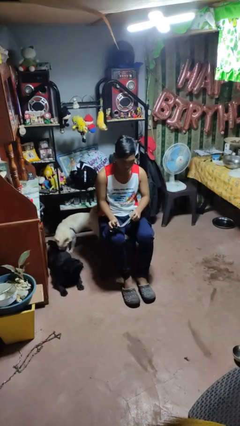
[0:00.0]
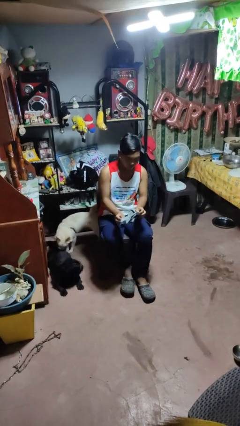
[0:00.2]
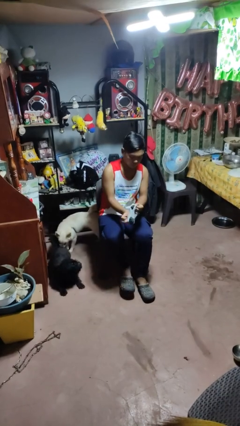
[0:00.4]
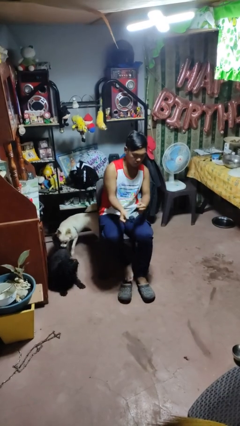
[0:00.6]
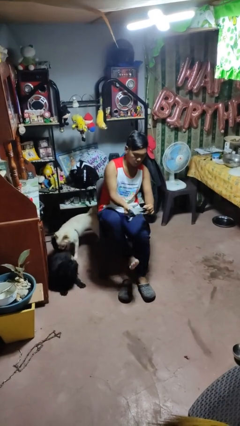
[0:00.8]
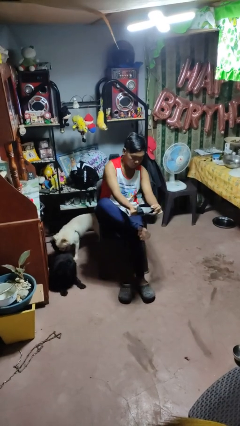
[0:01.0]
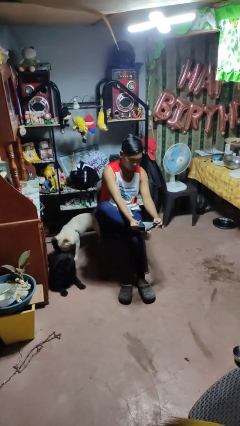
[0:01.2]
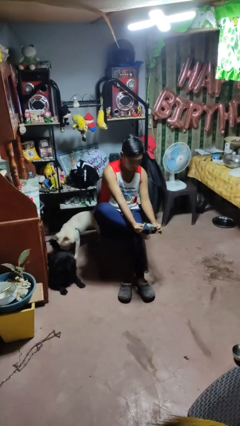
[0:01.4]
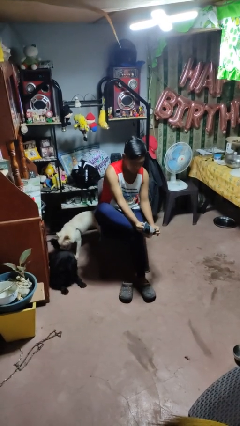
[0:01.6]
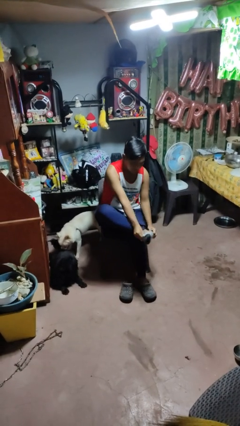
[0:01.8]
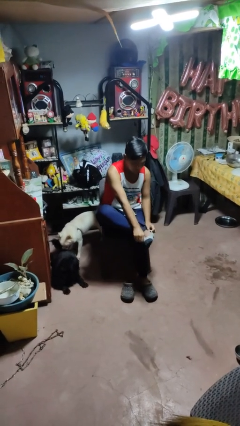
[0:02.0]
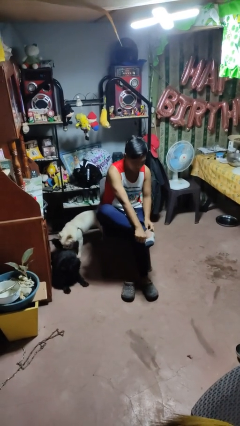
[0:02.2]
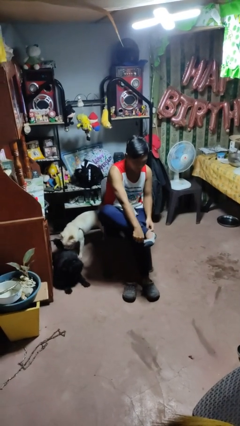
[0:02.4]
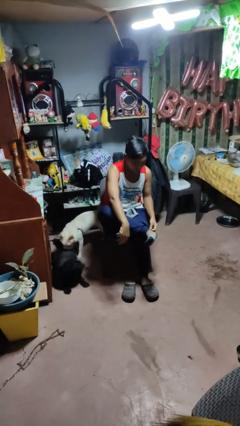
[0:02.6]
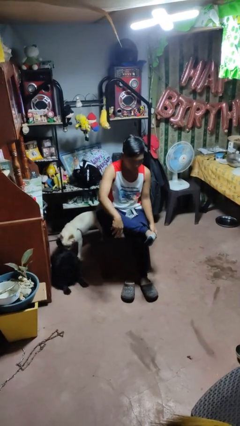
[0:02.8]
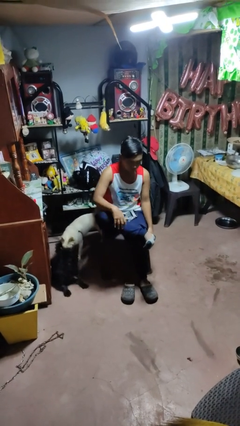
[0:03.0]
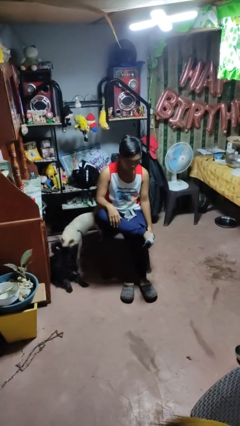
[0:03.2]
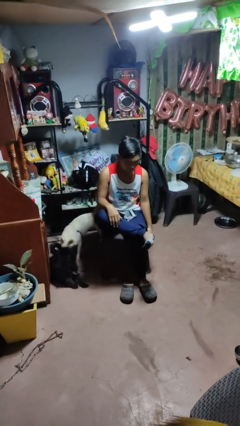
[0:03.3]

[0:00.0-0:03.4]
person puts on socks

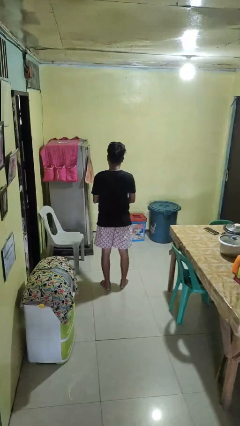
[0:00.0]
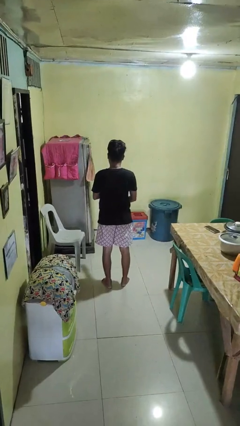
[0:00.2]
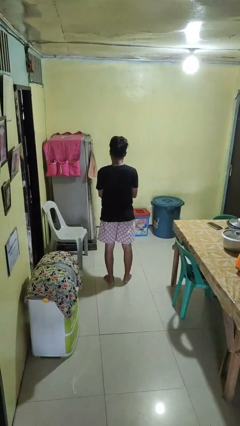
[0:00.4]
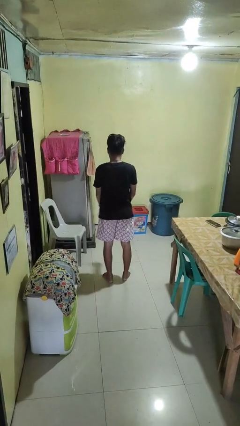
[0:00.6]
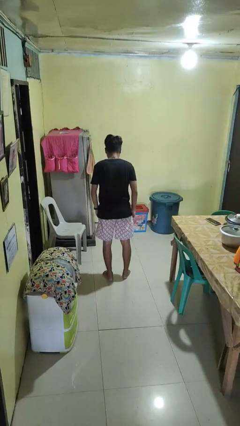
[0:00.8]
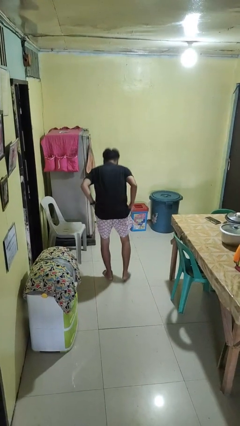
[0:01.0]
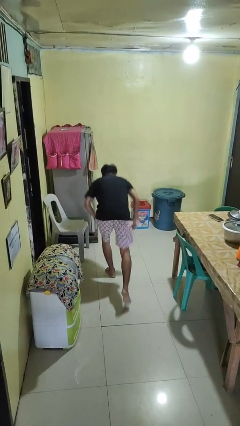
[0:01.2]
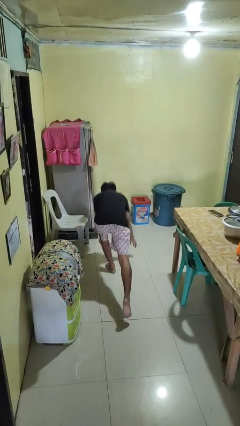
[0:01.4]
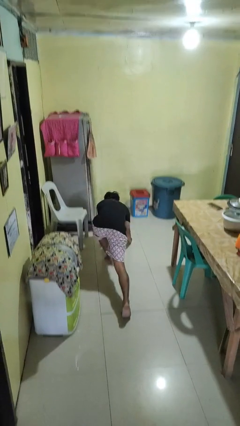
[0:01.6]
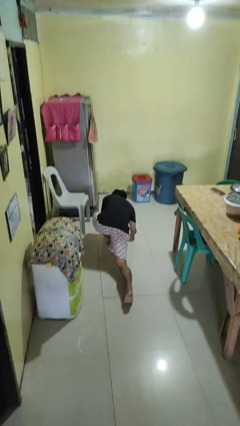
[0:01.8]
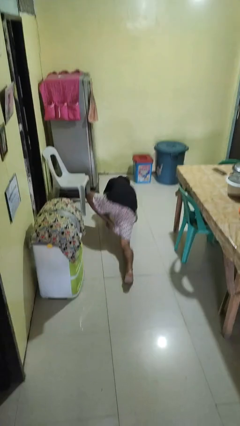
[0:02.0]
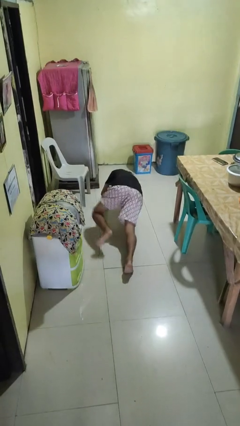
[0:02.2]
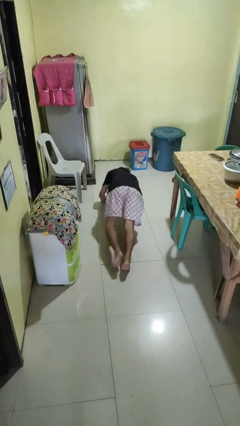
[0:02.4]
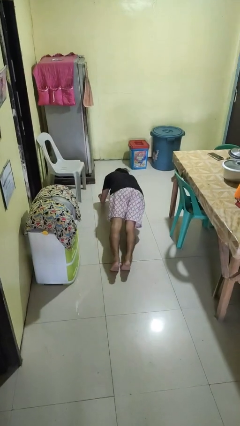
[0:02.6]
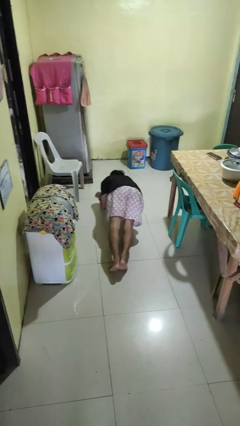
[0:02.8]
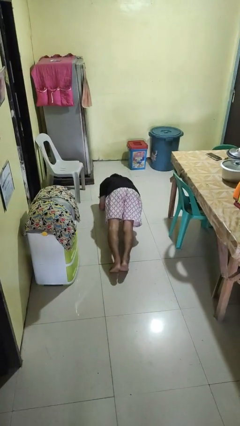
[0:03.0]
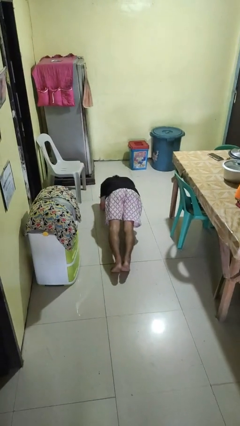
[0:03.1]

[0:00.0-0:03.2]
person exercises with plank

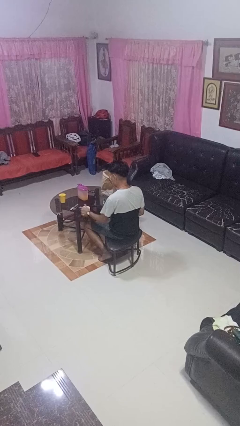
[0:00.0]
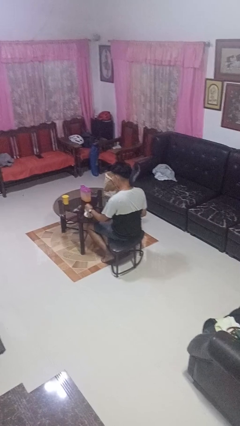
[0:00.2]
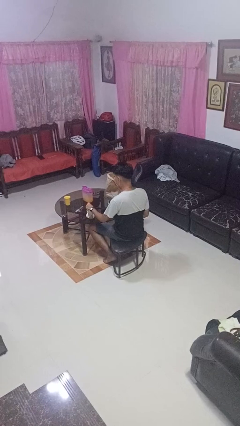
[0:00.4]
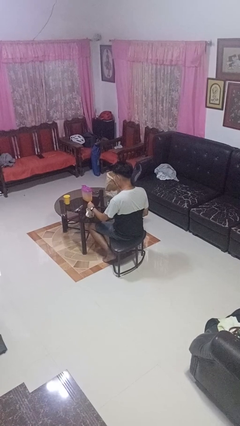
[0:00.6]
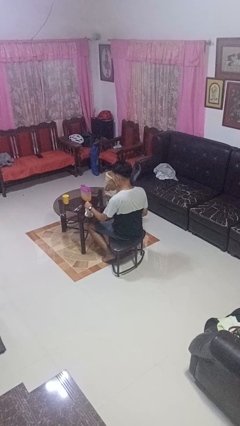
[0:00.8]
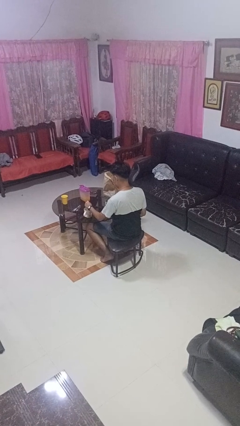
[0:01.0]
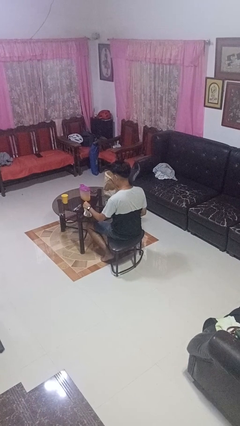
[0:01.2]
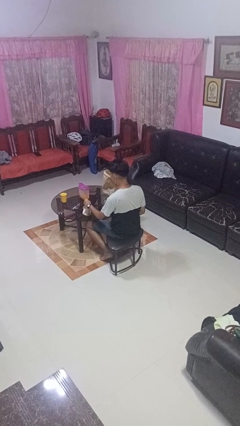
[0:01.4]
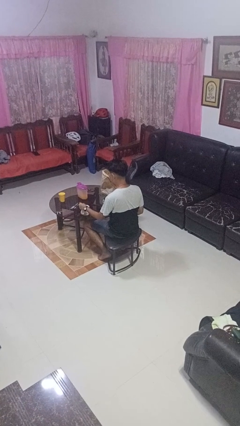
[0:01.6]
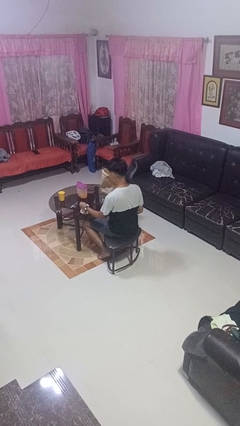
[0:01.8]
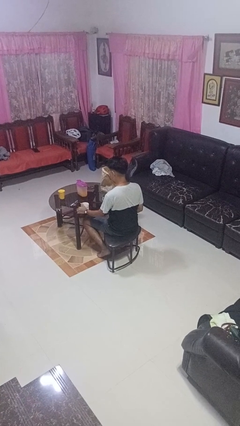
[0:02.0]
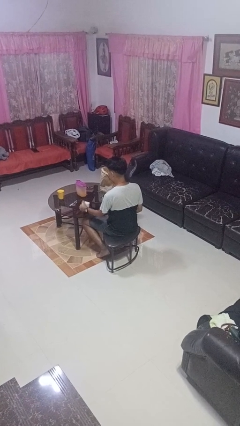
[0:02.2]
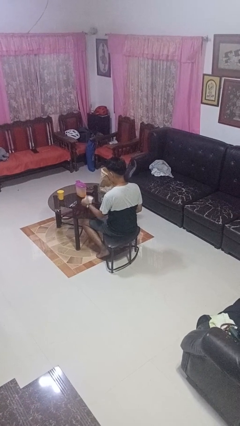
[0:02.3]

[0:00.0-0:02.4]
person stirs mug

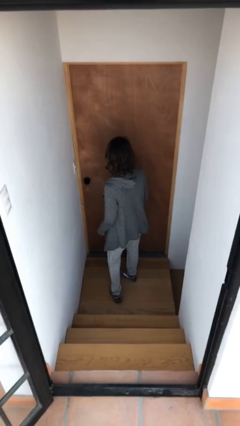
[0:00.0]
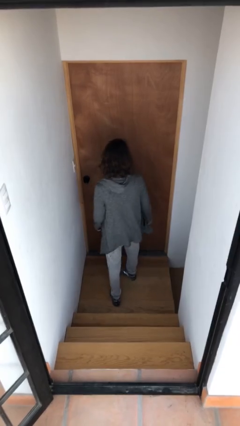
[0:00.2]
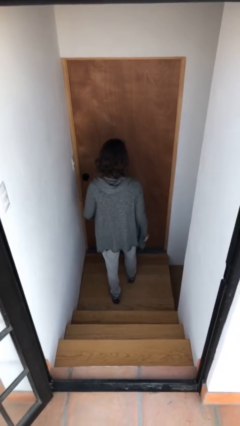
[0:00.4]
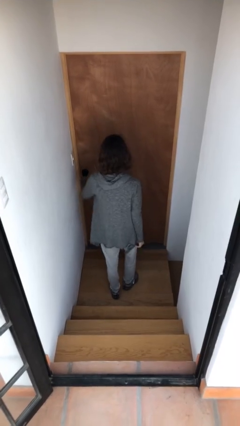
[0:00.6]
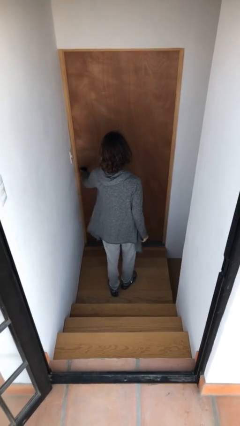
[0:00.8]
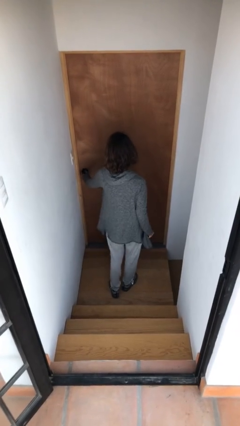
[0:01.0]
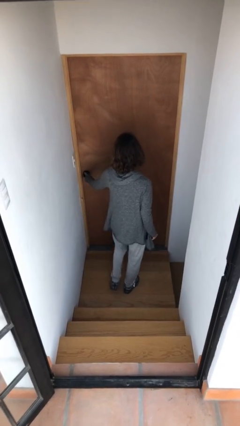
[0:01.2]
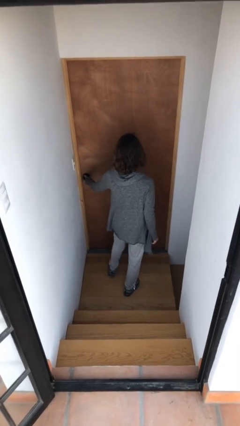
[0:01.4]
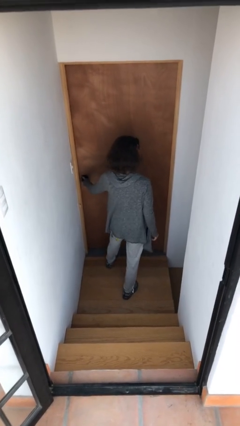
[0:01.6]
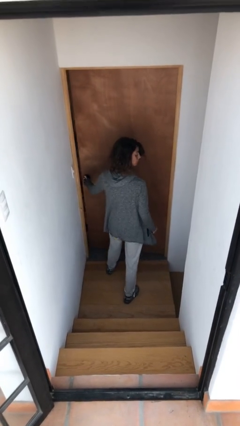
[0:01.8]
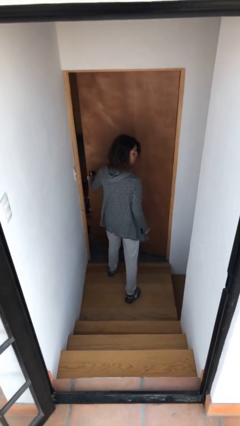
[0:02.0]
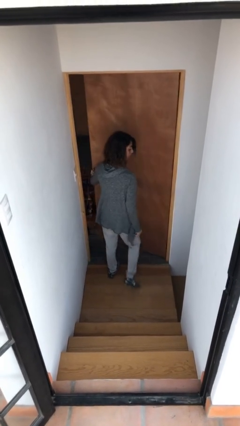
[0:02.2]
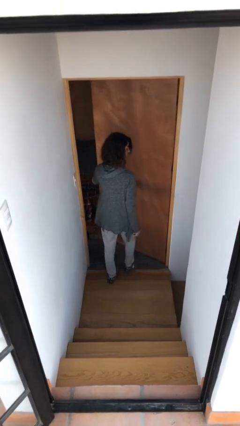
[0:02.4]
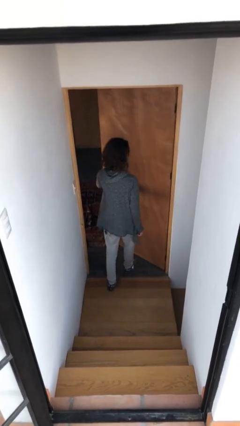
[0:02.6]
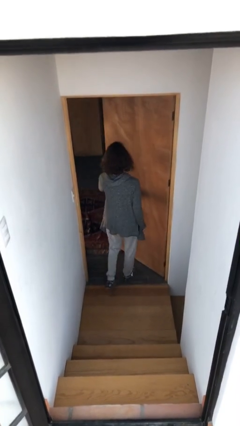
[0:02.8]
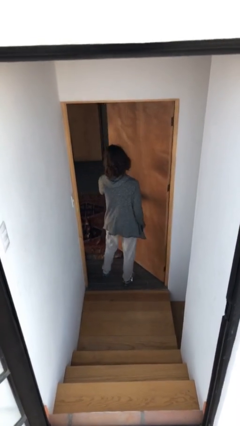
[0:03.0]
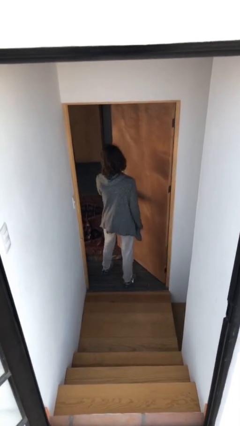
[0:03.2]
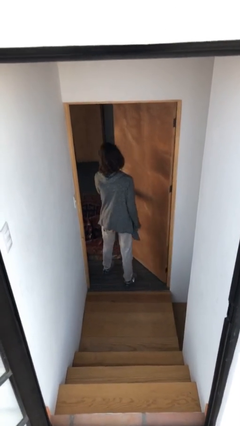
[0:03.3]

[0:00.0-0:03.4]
person opens facility door

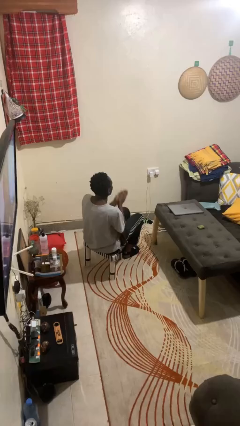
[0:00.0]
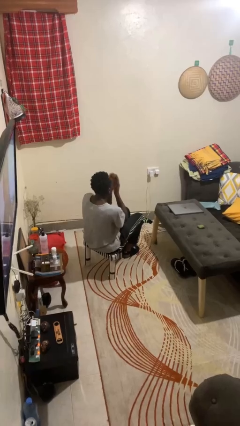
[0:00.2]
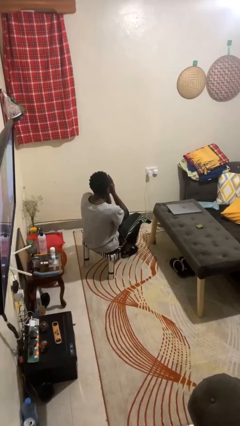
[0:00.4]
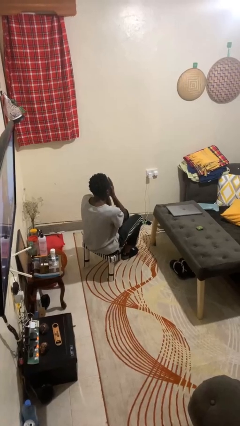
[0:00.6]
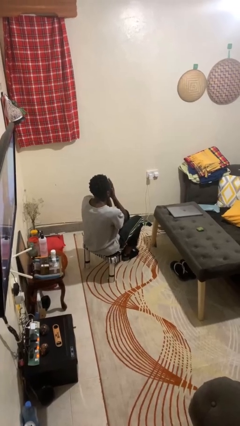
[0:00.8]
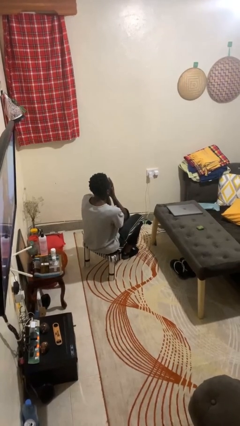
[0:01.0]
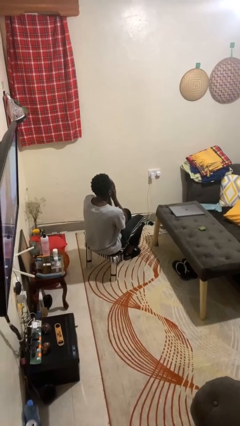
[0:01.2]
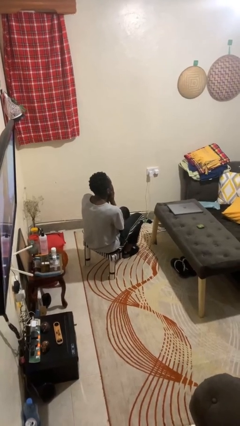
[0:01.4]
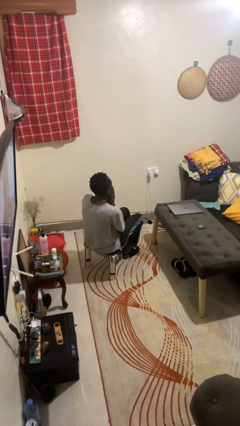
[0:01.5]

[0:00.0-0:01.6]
person covers face with hands

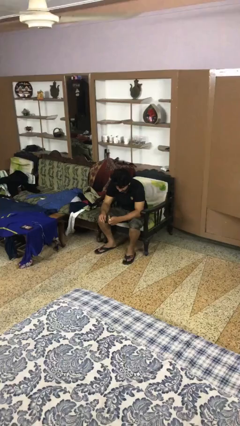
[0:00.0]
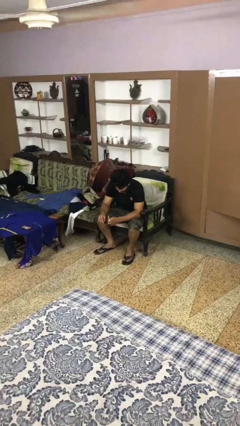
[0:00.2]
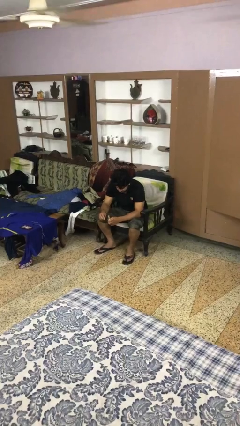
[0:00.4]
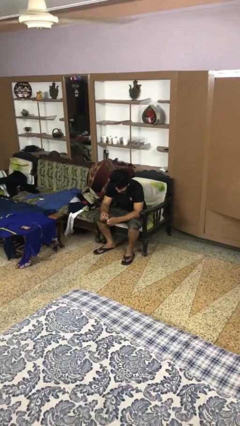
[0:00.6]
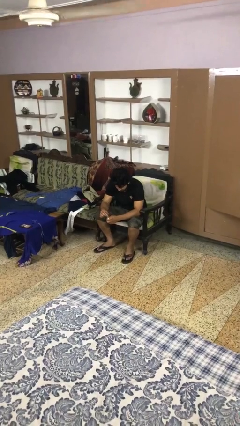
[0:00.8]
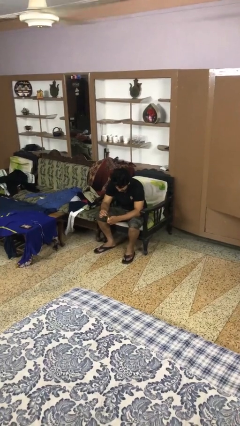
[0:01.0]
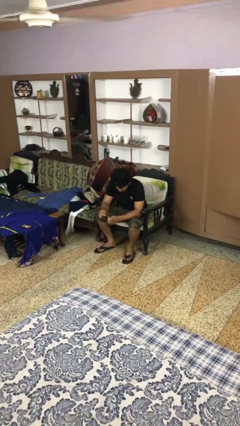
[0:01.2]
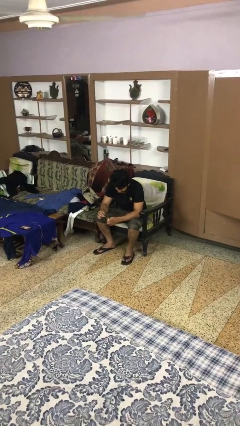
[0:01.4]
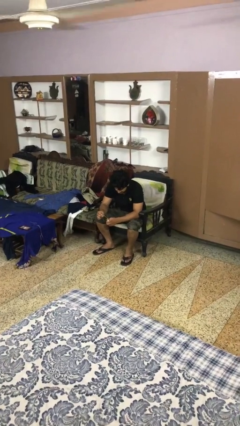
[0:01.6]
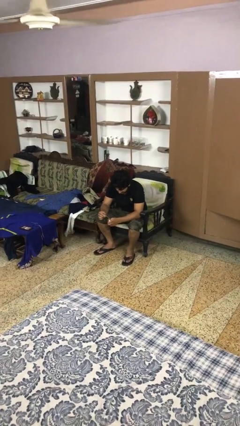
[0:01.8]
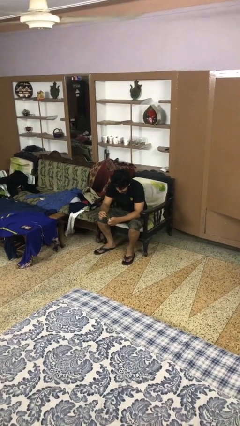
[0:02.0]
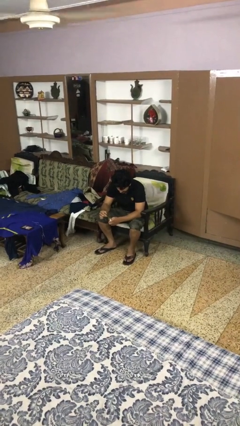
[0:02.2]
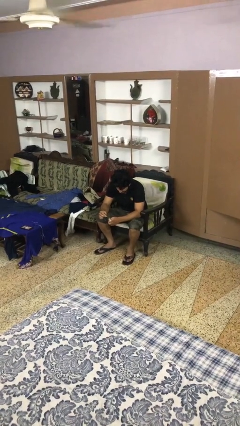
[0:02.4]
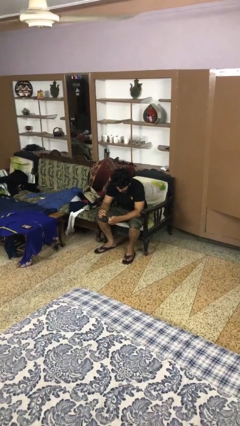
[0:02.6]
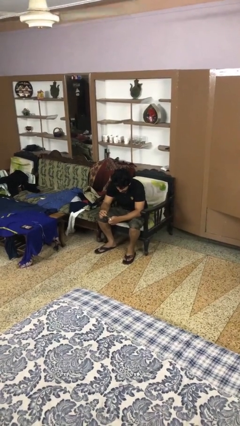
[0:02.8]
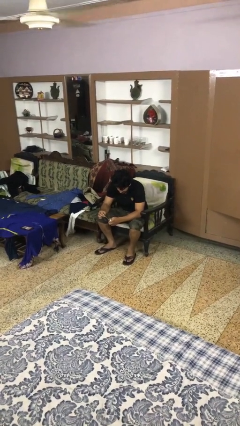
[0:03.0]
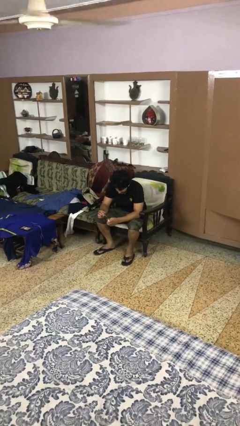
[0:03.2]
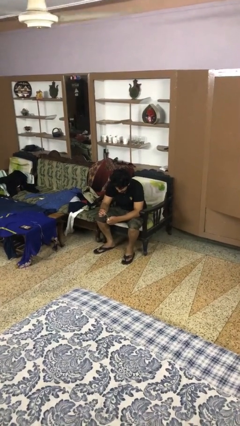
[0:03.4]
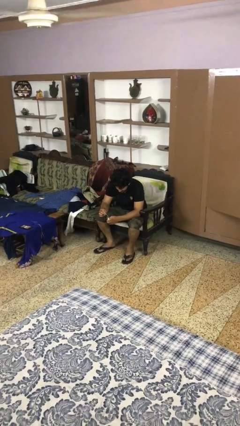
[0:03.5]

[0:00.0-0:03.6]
person paints fingernails
